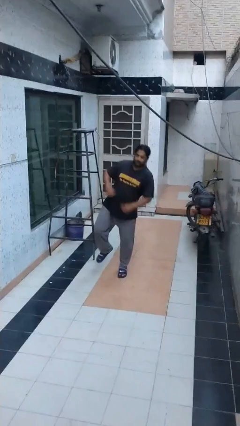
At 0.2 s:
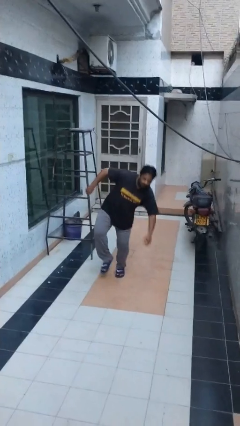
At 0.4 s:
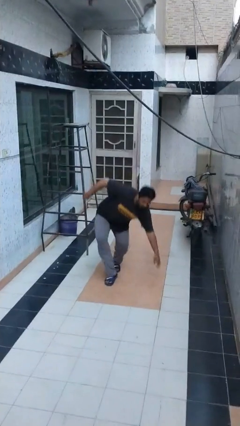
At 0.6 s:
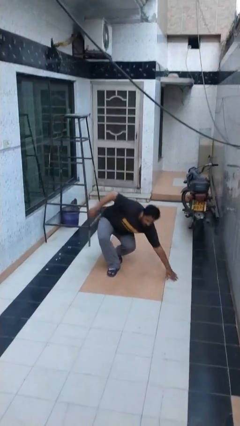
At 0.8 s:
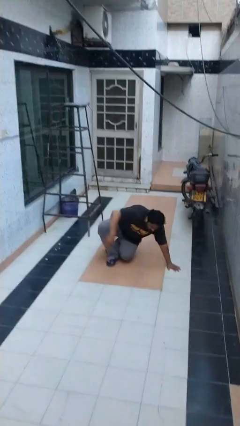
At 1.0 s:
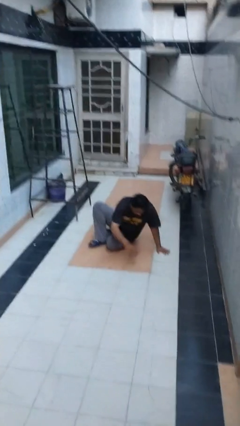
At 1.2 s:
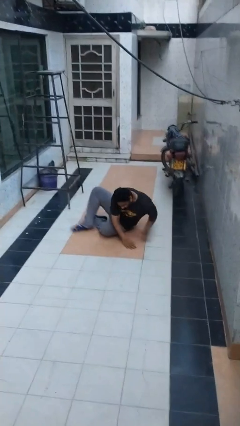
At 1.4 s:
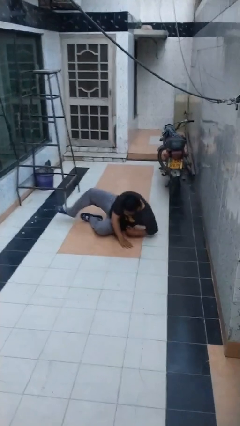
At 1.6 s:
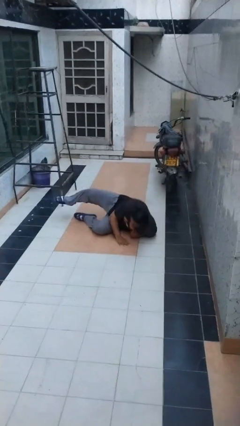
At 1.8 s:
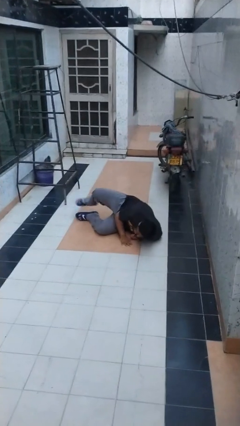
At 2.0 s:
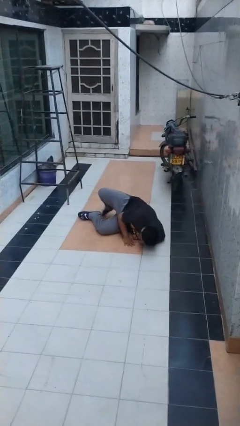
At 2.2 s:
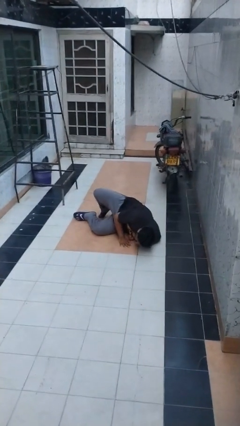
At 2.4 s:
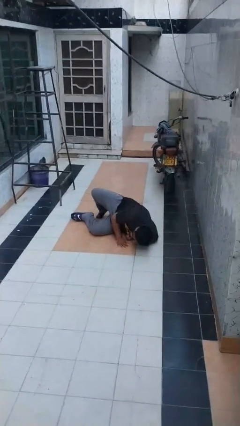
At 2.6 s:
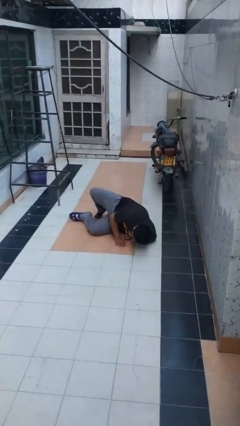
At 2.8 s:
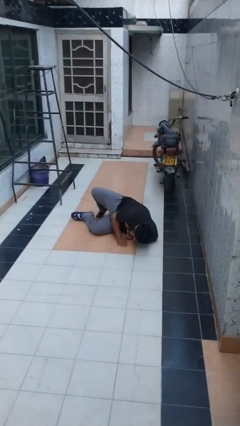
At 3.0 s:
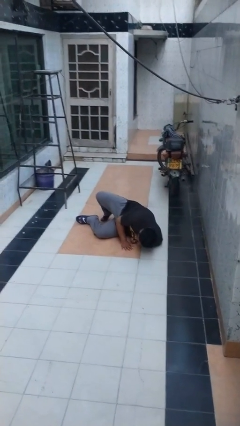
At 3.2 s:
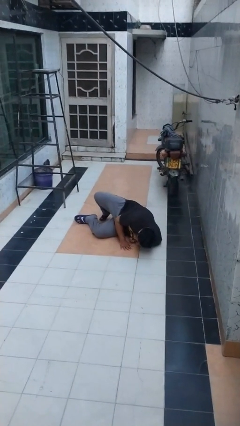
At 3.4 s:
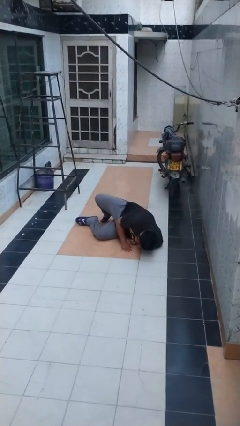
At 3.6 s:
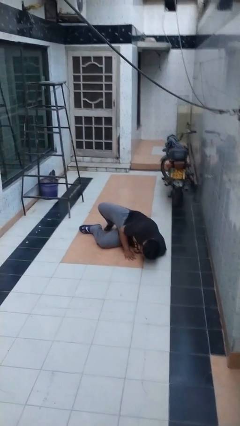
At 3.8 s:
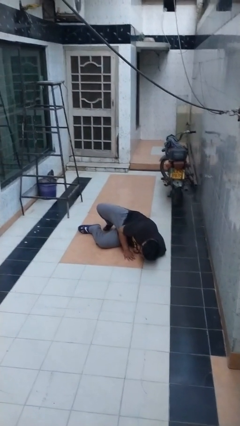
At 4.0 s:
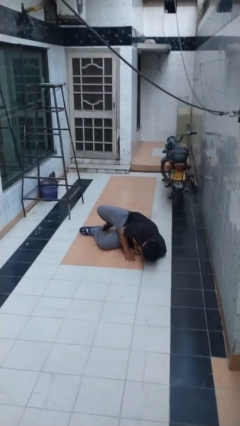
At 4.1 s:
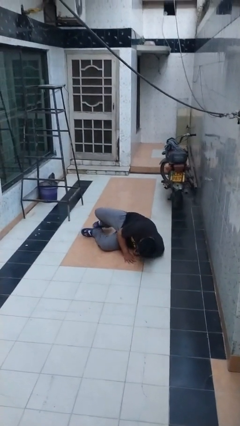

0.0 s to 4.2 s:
person lies down on floor

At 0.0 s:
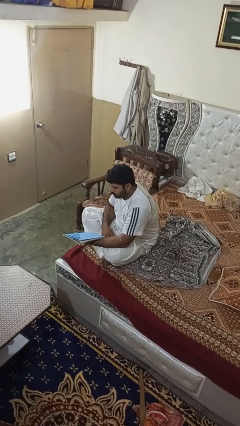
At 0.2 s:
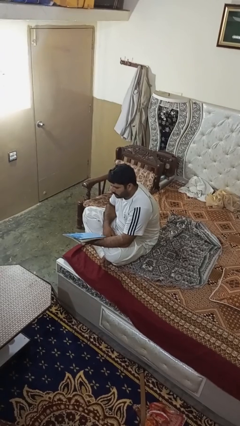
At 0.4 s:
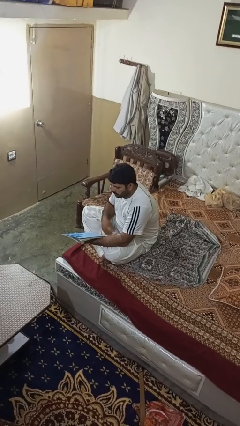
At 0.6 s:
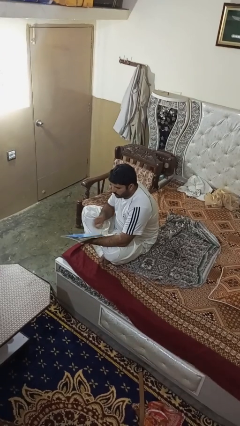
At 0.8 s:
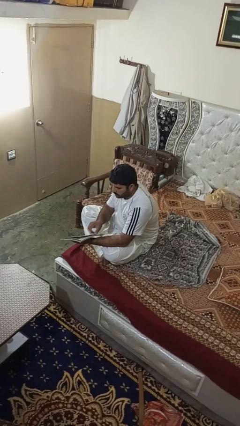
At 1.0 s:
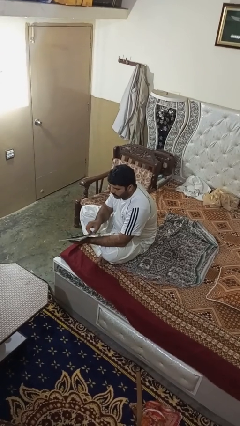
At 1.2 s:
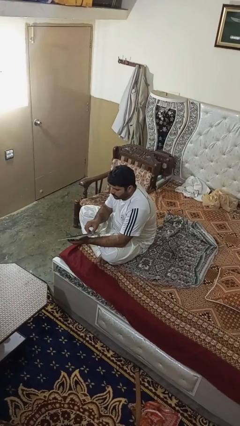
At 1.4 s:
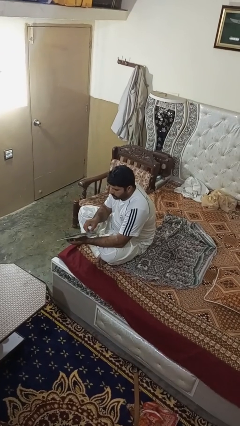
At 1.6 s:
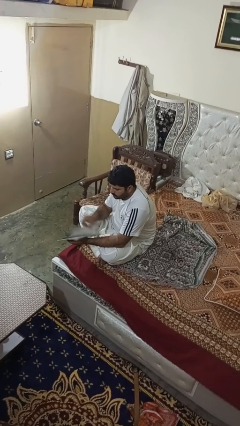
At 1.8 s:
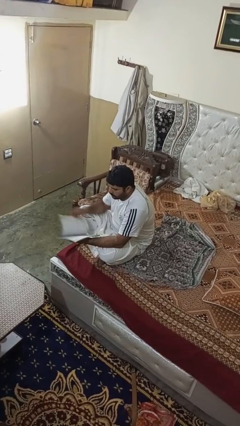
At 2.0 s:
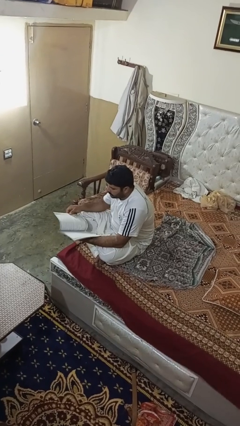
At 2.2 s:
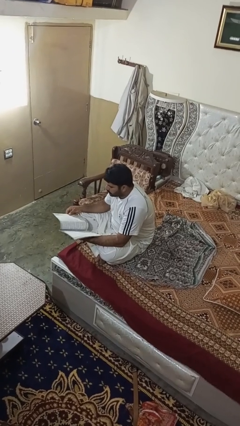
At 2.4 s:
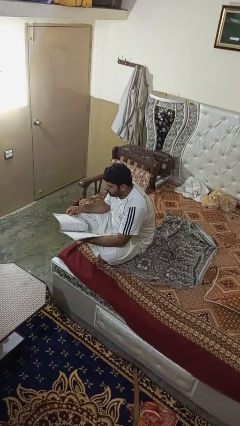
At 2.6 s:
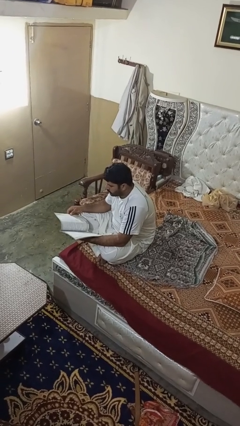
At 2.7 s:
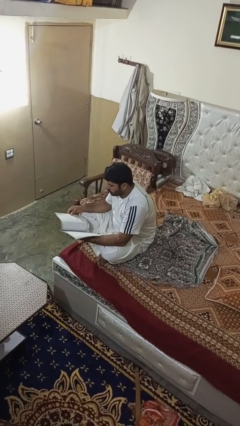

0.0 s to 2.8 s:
person reads magazine

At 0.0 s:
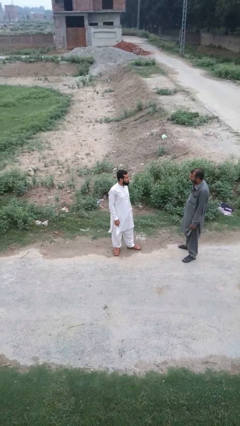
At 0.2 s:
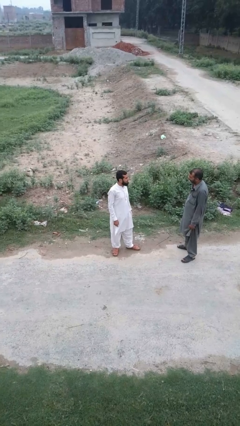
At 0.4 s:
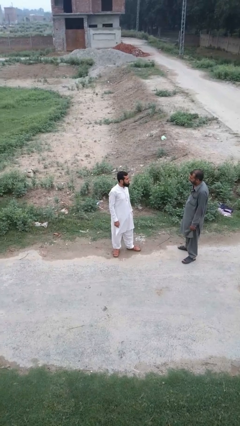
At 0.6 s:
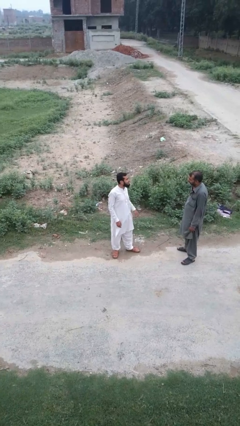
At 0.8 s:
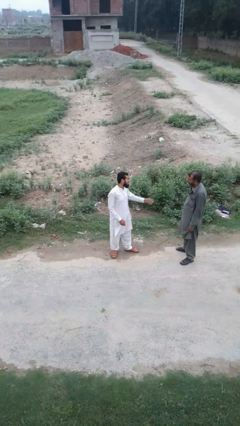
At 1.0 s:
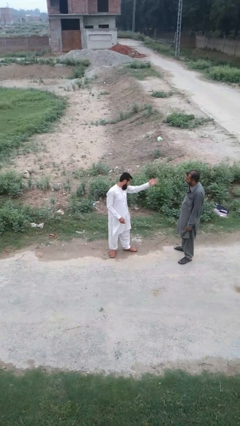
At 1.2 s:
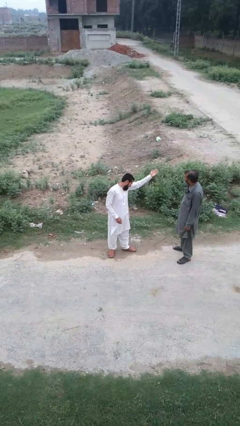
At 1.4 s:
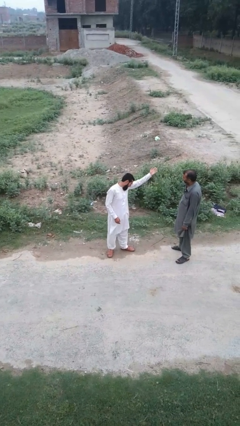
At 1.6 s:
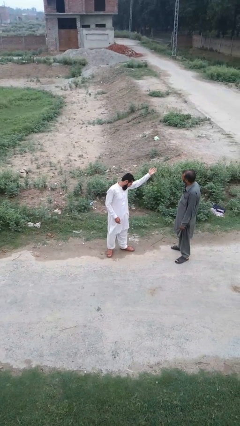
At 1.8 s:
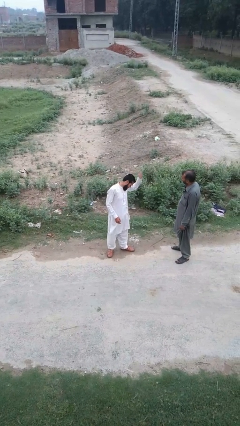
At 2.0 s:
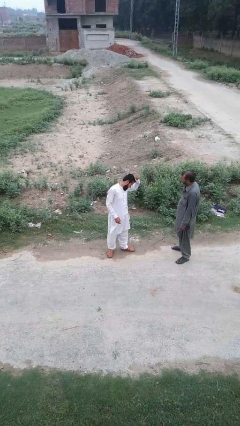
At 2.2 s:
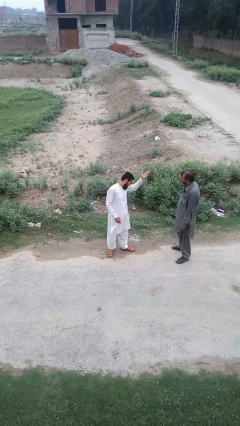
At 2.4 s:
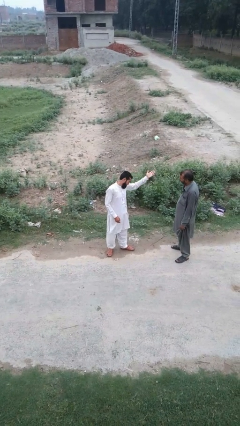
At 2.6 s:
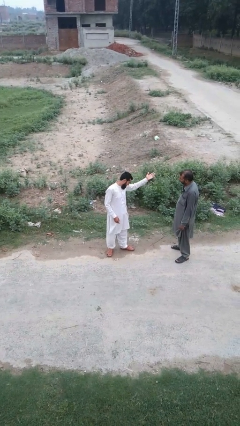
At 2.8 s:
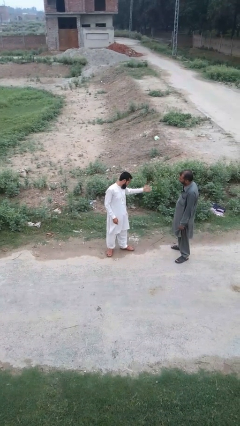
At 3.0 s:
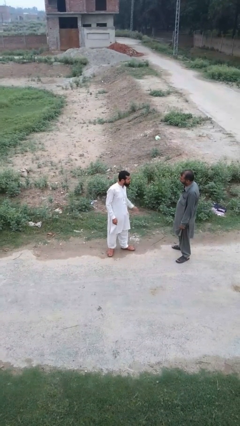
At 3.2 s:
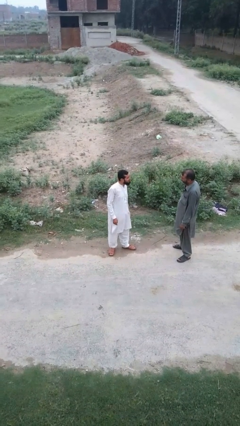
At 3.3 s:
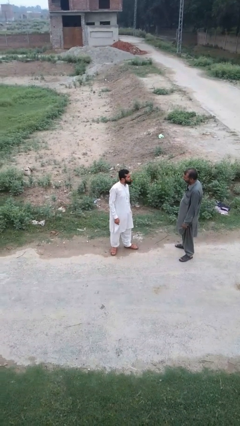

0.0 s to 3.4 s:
person shoves person

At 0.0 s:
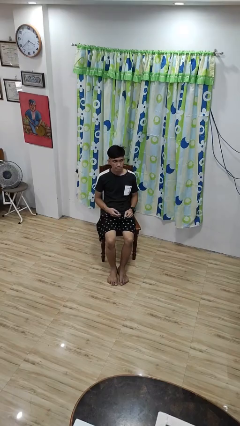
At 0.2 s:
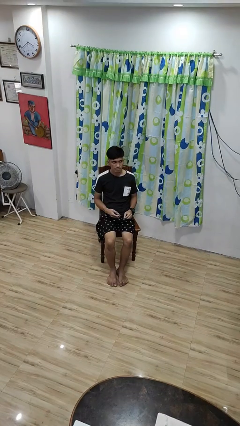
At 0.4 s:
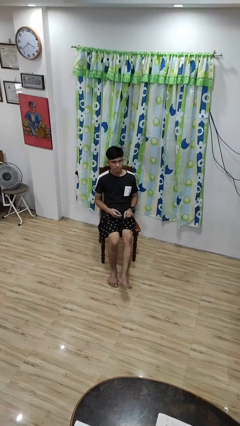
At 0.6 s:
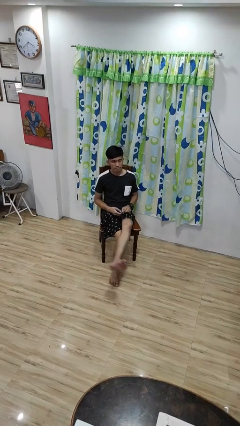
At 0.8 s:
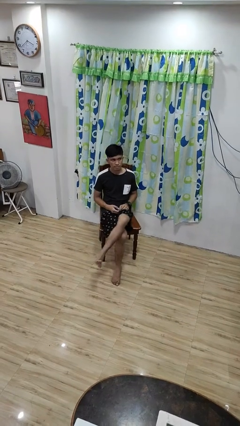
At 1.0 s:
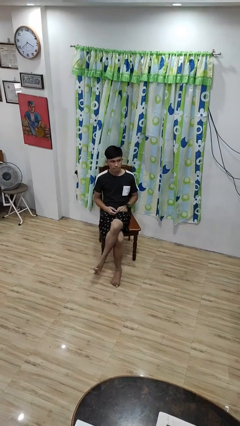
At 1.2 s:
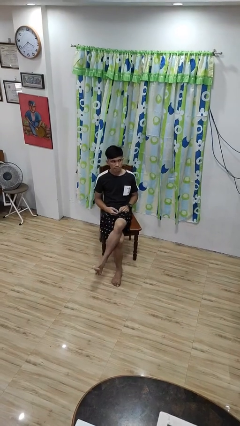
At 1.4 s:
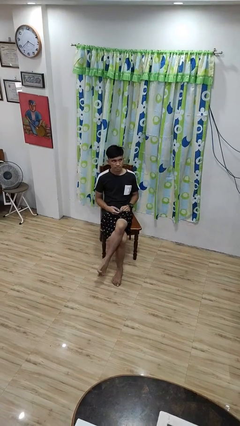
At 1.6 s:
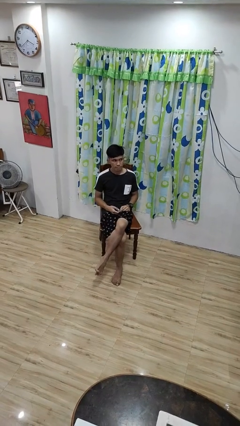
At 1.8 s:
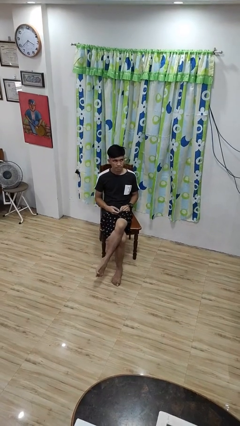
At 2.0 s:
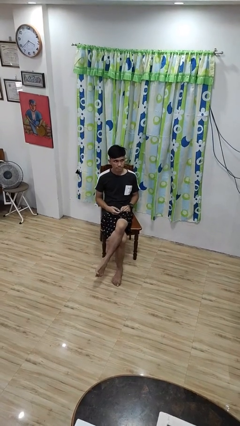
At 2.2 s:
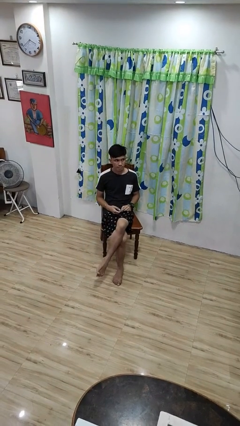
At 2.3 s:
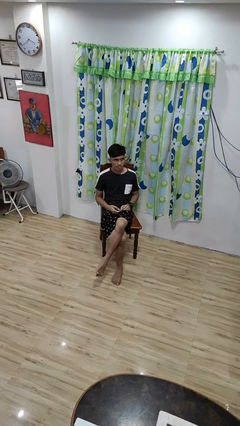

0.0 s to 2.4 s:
person crosses legs

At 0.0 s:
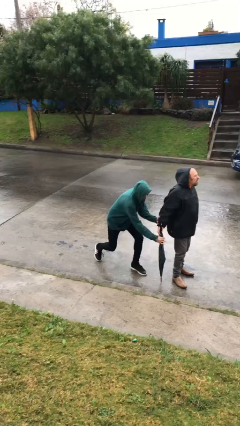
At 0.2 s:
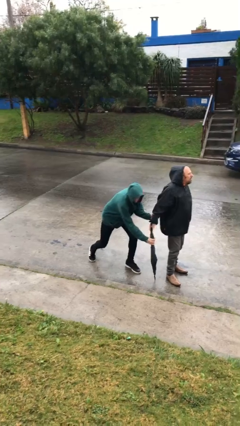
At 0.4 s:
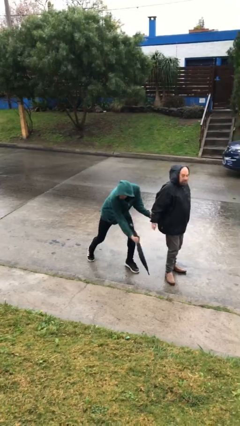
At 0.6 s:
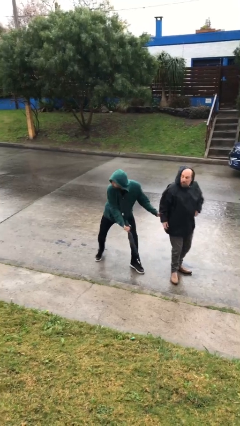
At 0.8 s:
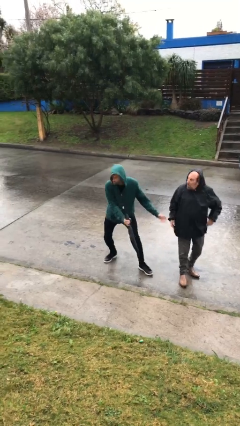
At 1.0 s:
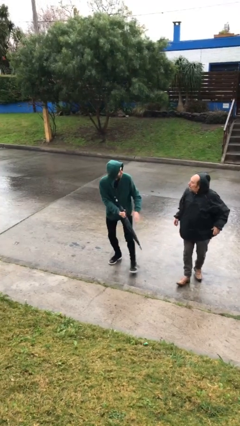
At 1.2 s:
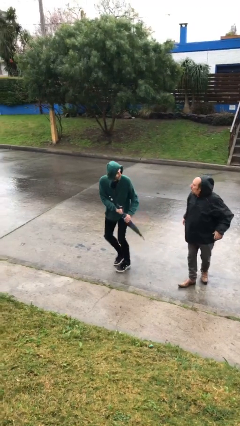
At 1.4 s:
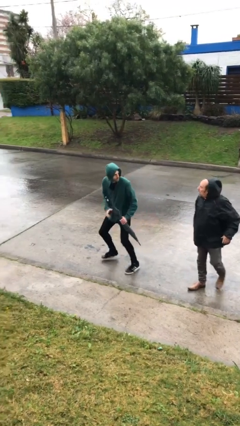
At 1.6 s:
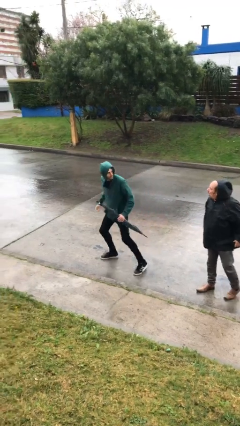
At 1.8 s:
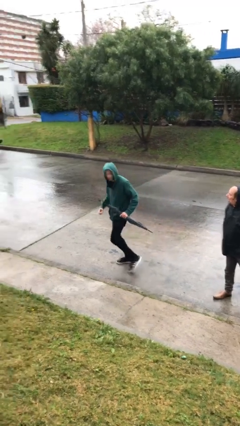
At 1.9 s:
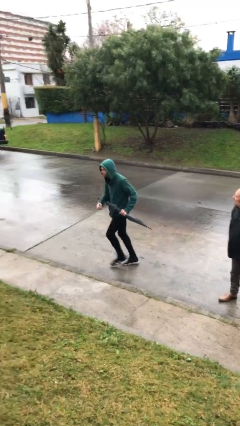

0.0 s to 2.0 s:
person steals object from person

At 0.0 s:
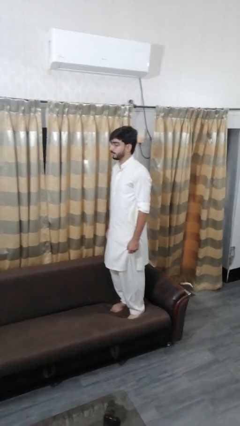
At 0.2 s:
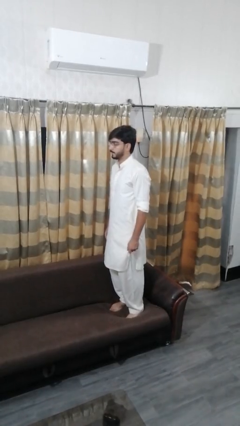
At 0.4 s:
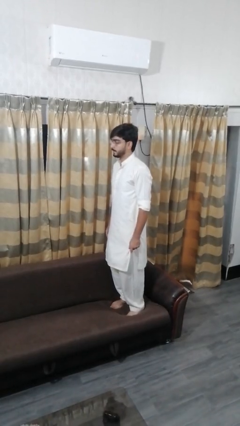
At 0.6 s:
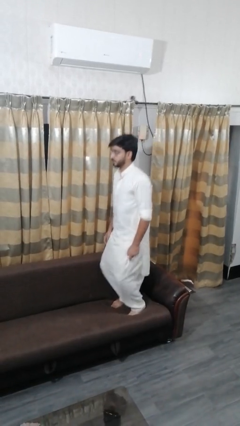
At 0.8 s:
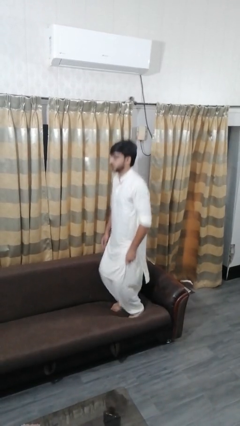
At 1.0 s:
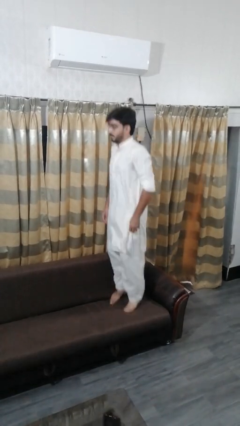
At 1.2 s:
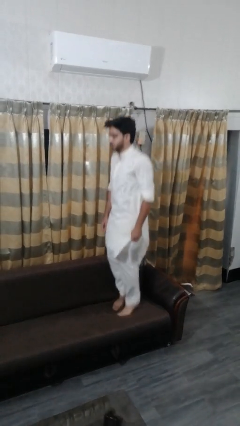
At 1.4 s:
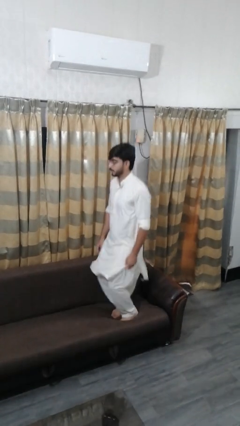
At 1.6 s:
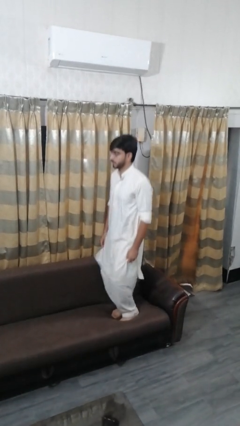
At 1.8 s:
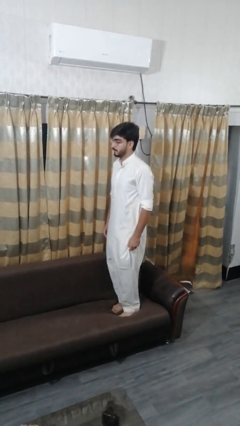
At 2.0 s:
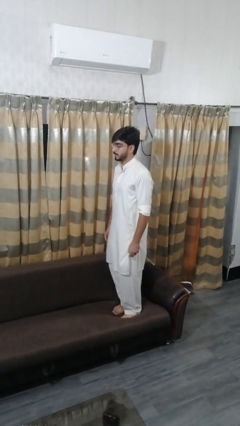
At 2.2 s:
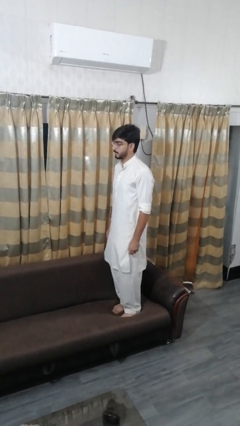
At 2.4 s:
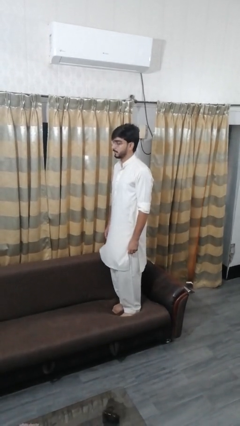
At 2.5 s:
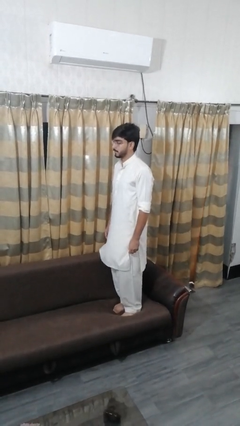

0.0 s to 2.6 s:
person jumps on couch
